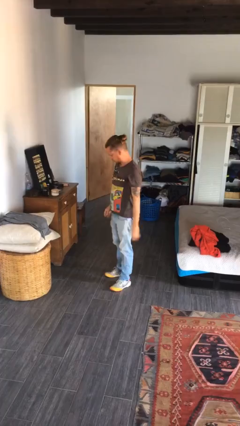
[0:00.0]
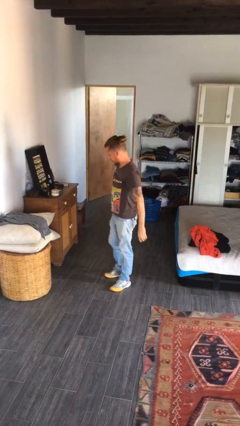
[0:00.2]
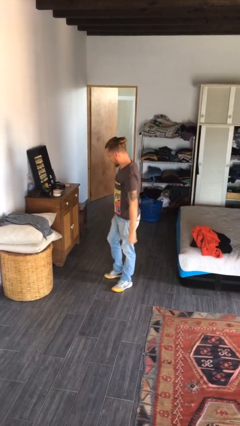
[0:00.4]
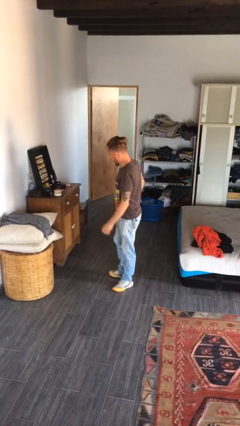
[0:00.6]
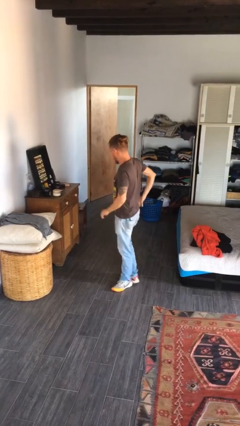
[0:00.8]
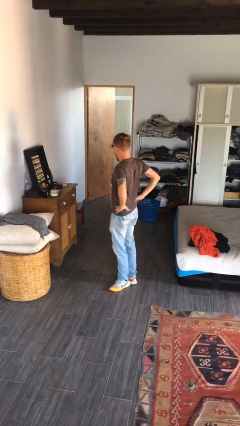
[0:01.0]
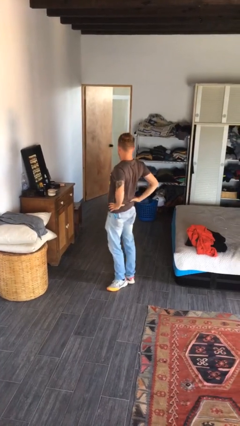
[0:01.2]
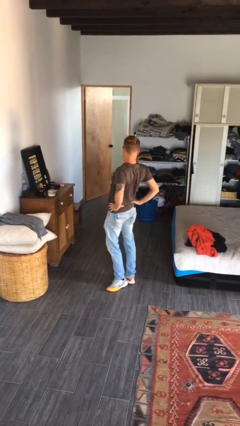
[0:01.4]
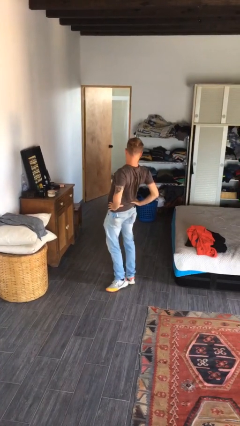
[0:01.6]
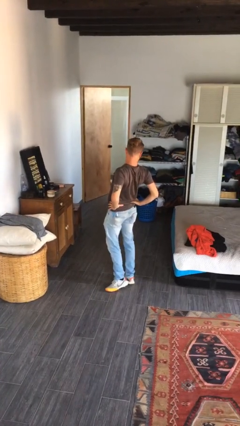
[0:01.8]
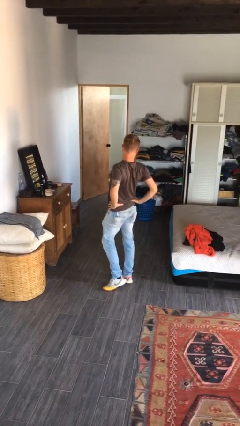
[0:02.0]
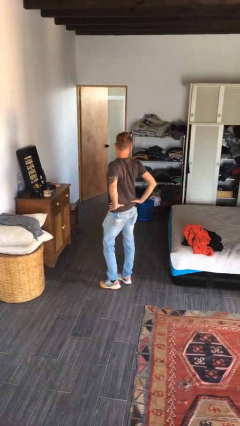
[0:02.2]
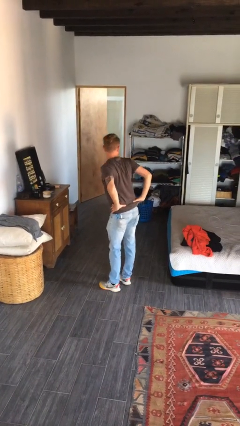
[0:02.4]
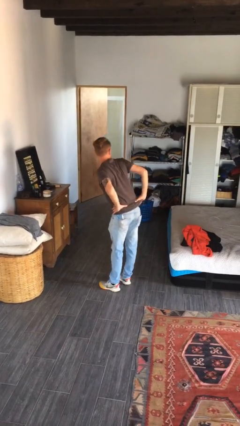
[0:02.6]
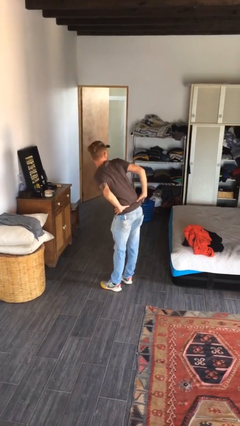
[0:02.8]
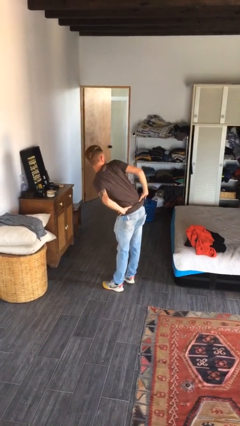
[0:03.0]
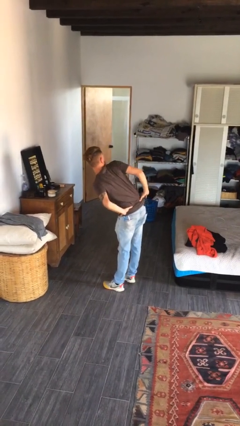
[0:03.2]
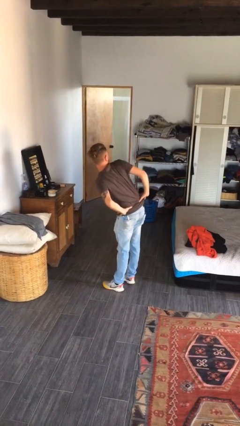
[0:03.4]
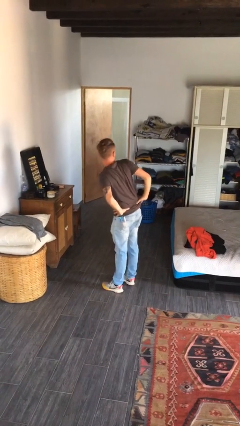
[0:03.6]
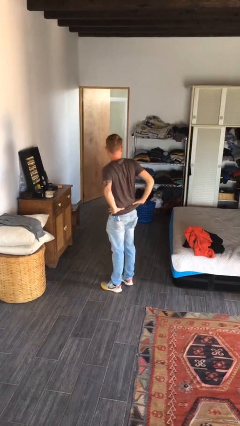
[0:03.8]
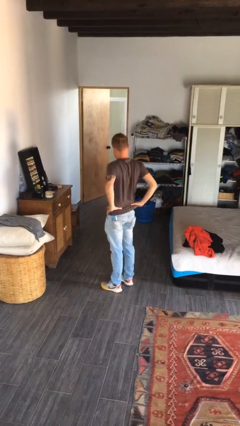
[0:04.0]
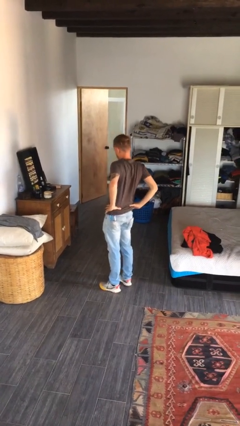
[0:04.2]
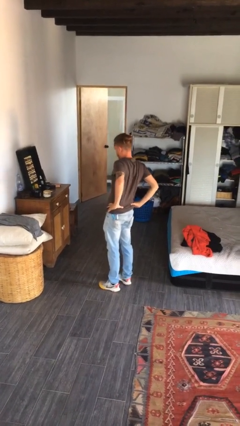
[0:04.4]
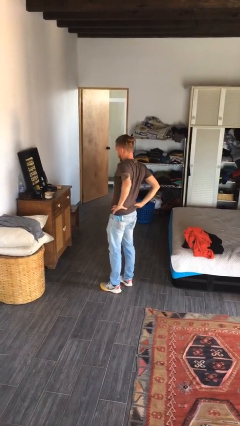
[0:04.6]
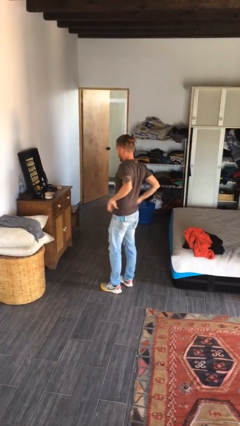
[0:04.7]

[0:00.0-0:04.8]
person stretches back

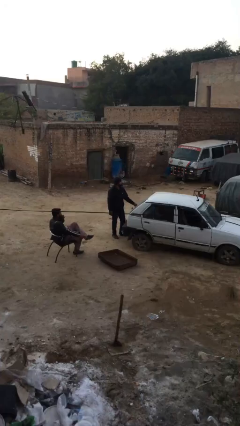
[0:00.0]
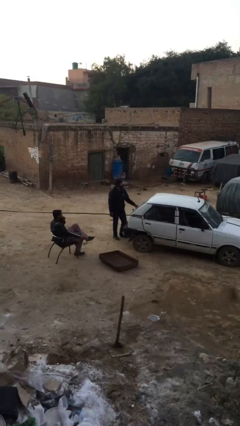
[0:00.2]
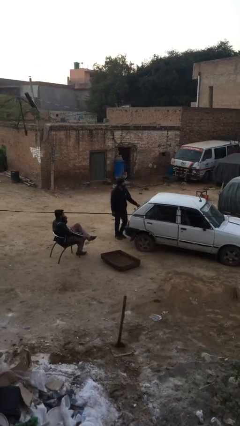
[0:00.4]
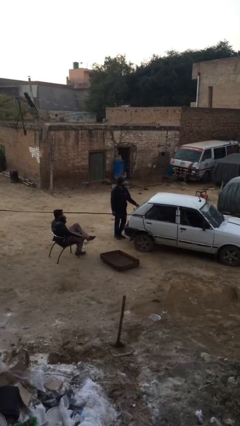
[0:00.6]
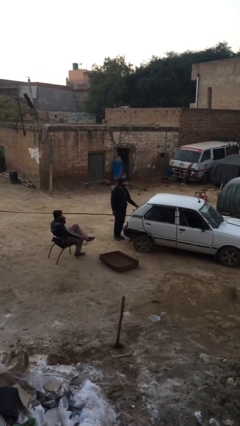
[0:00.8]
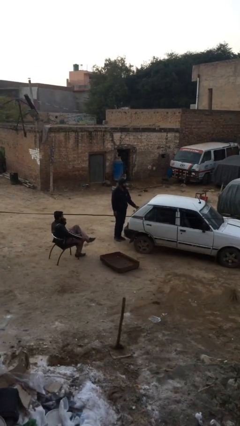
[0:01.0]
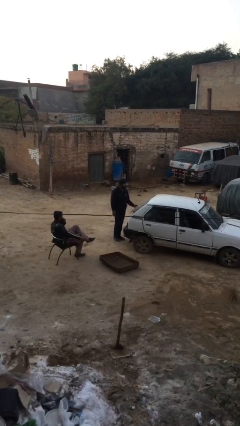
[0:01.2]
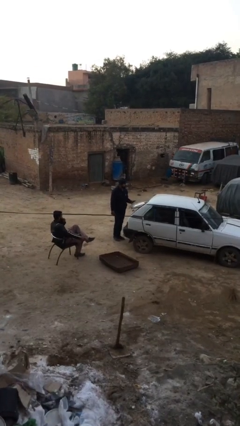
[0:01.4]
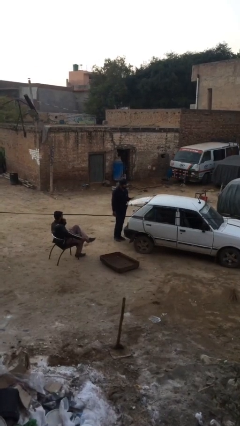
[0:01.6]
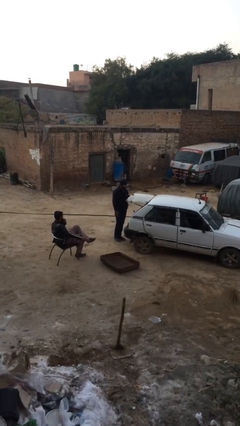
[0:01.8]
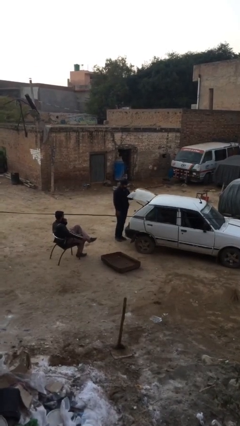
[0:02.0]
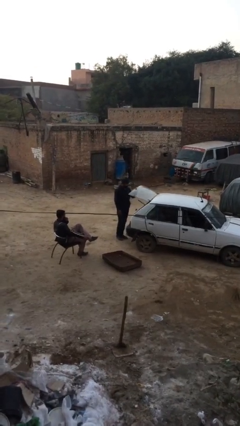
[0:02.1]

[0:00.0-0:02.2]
person opens car trunk

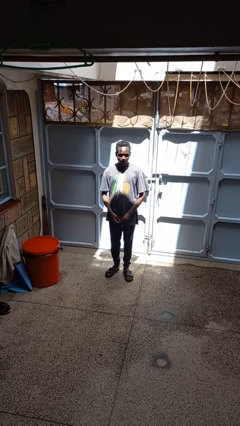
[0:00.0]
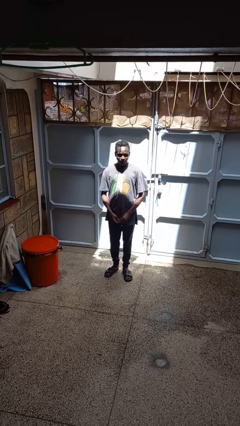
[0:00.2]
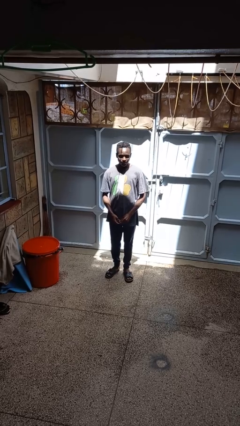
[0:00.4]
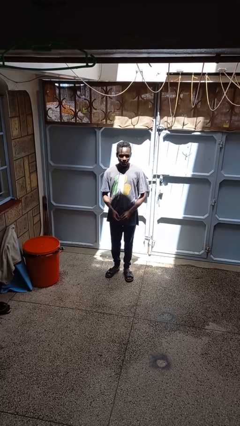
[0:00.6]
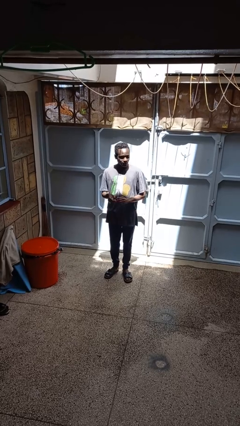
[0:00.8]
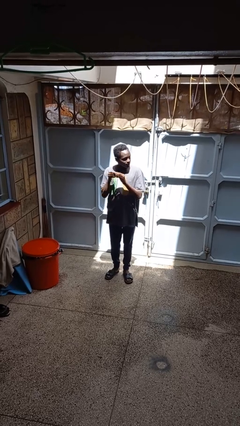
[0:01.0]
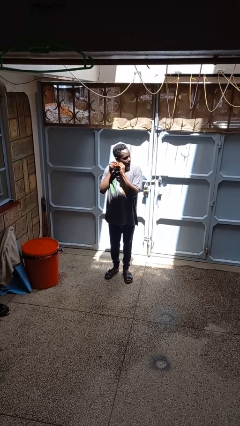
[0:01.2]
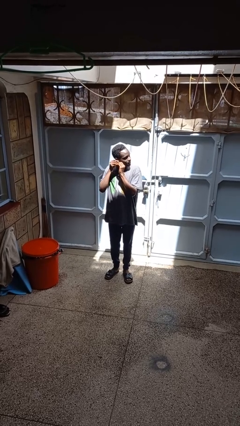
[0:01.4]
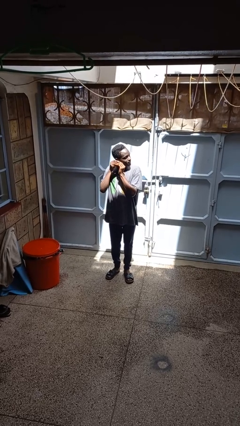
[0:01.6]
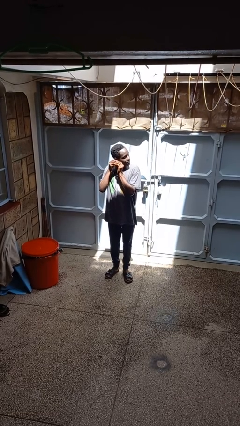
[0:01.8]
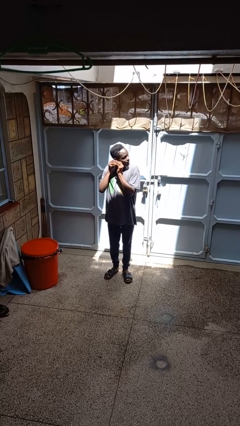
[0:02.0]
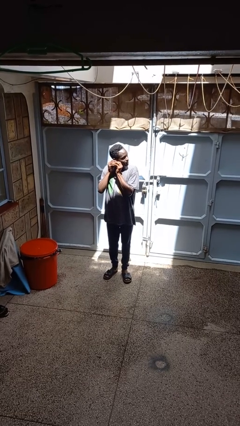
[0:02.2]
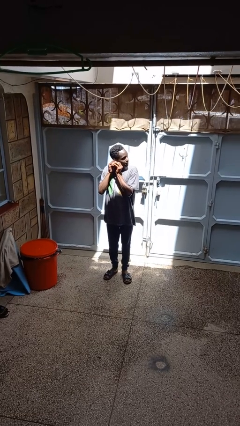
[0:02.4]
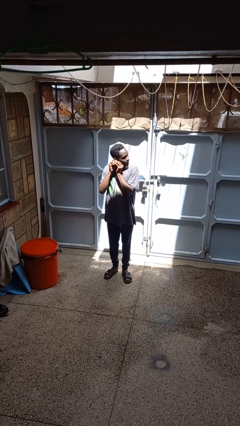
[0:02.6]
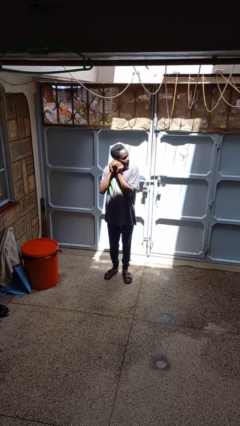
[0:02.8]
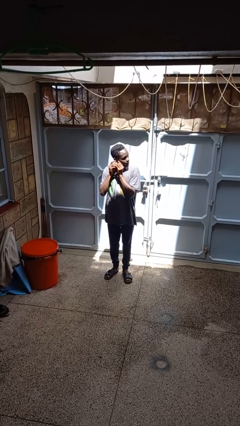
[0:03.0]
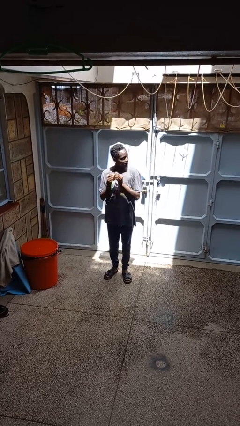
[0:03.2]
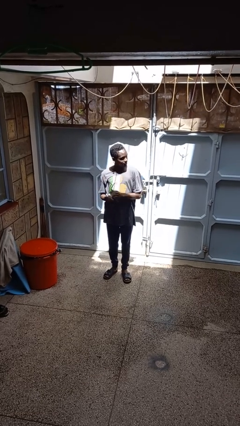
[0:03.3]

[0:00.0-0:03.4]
person puts on earrings

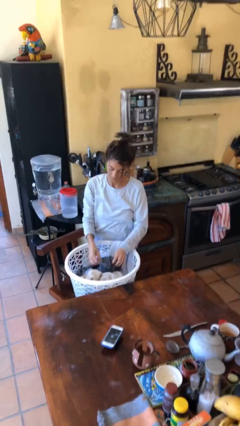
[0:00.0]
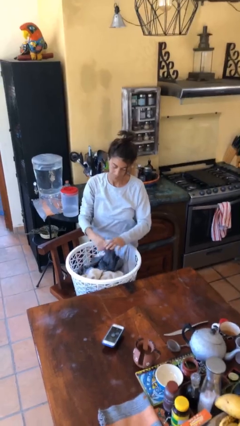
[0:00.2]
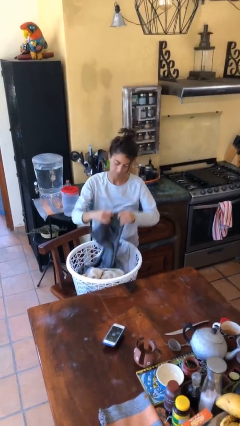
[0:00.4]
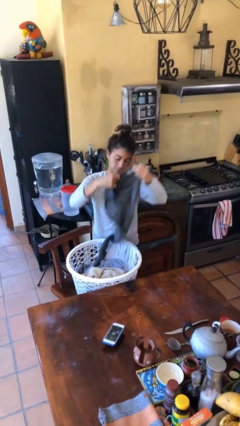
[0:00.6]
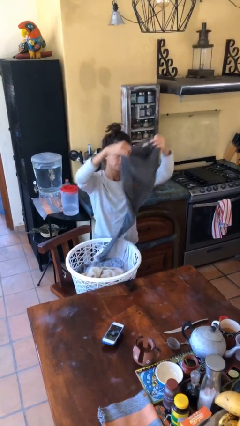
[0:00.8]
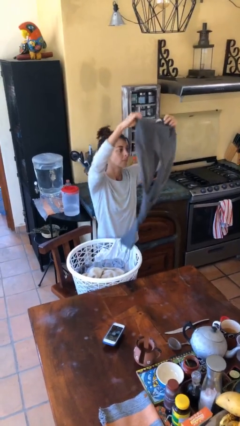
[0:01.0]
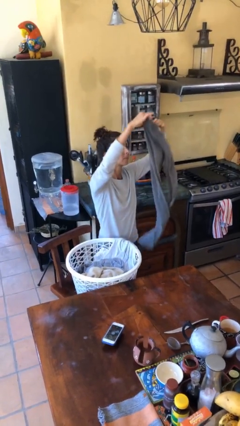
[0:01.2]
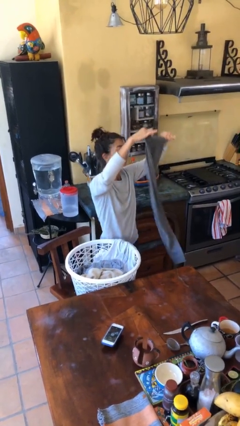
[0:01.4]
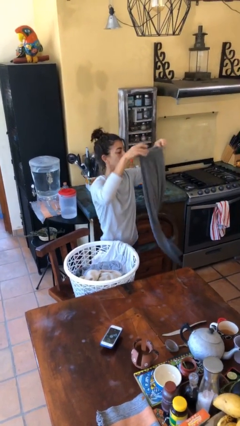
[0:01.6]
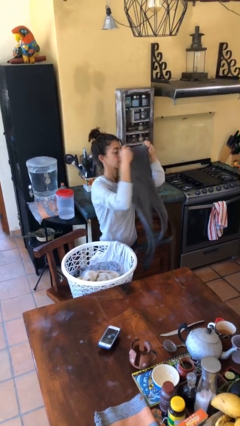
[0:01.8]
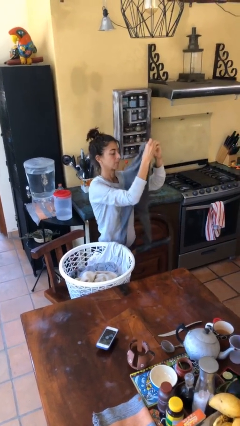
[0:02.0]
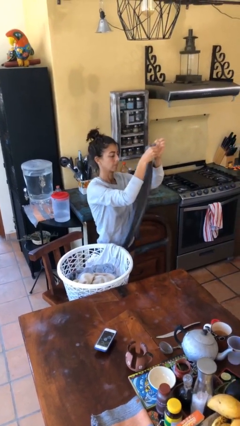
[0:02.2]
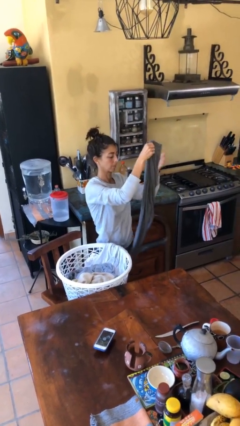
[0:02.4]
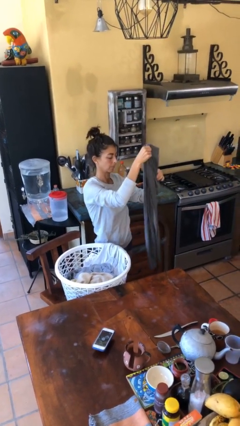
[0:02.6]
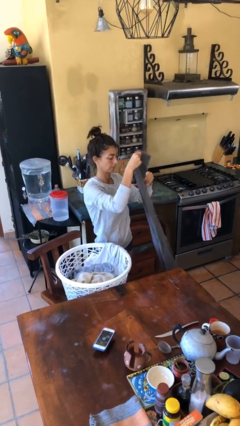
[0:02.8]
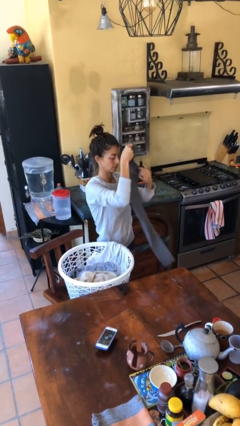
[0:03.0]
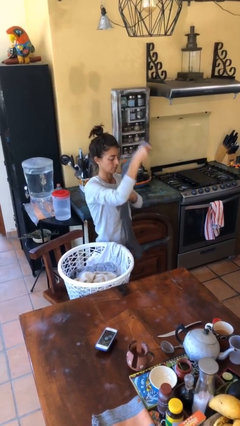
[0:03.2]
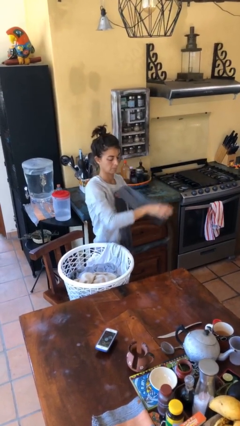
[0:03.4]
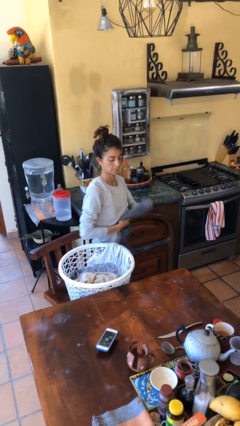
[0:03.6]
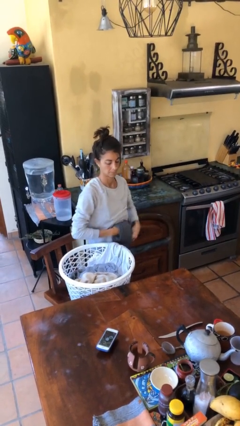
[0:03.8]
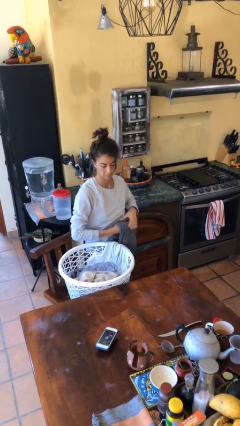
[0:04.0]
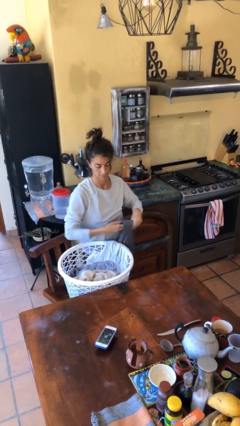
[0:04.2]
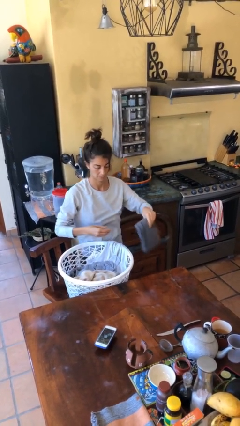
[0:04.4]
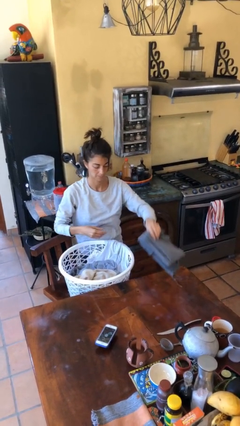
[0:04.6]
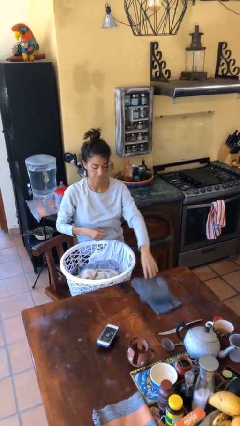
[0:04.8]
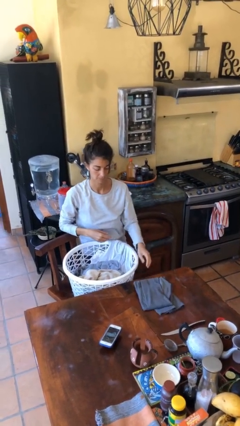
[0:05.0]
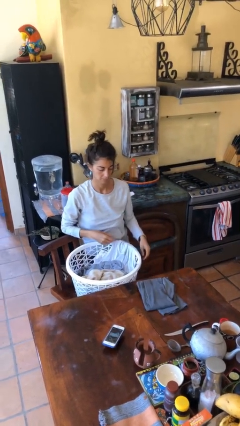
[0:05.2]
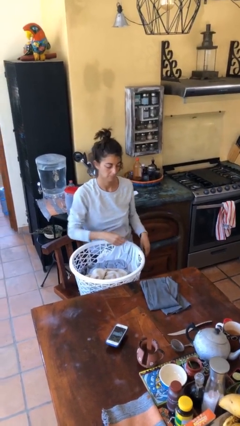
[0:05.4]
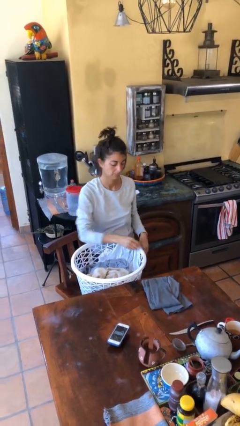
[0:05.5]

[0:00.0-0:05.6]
person folds pants

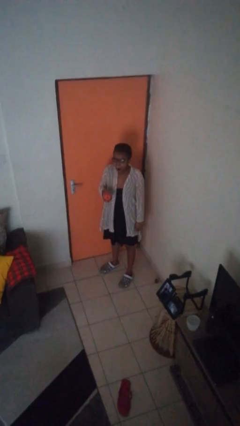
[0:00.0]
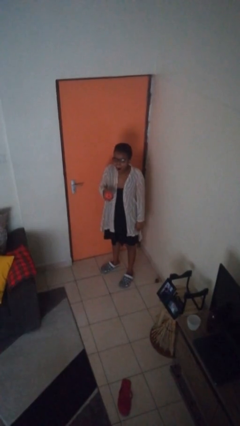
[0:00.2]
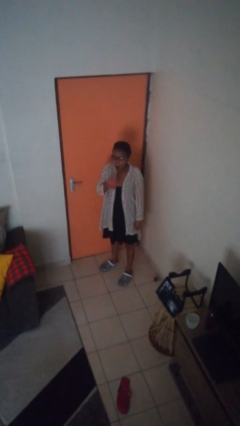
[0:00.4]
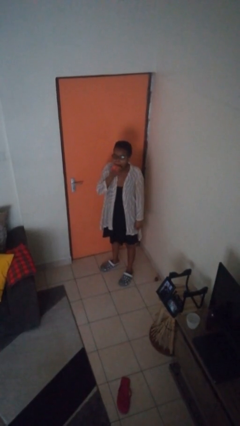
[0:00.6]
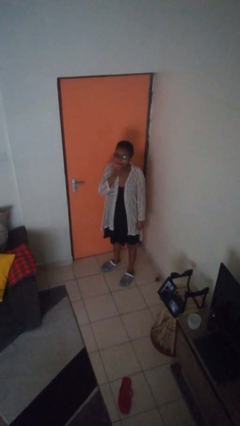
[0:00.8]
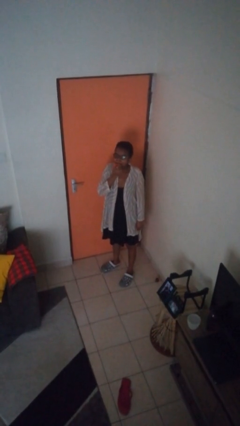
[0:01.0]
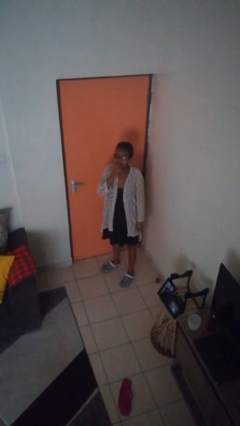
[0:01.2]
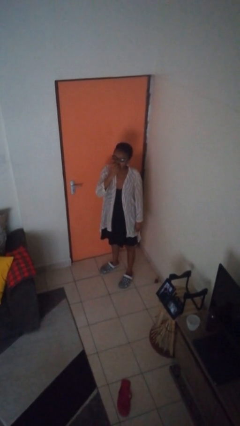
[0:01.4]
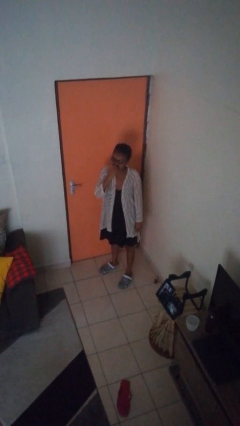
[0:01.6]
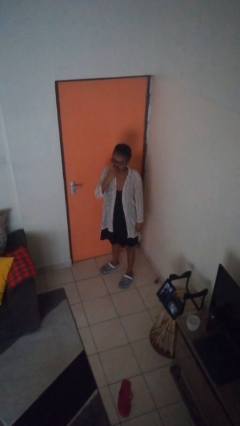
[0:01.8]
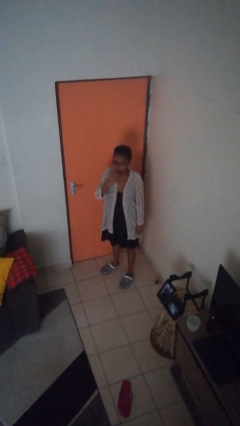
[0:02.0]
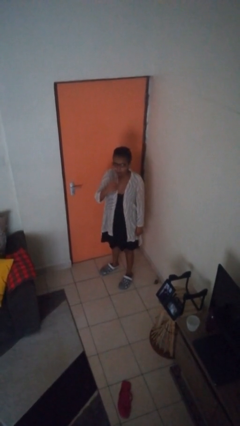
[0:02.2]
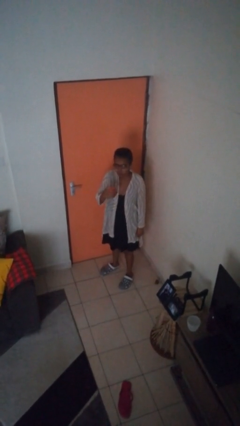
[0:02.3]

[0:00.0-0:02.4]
person eats apple
